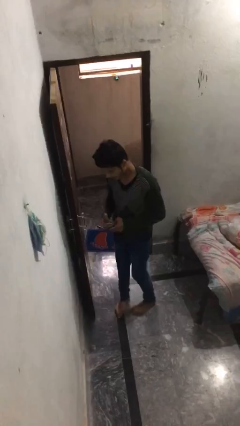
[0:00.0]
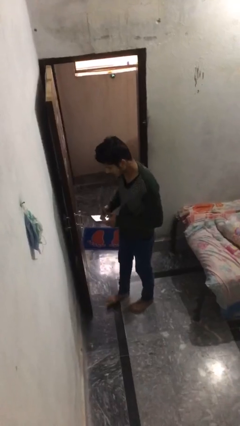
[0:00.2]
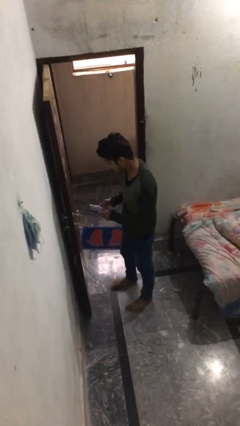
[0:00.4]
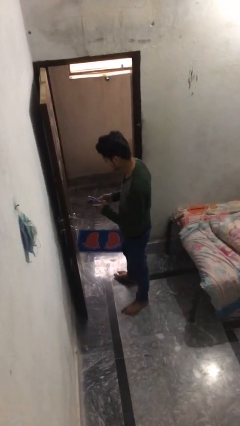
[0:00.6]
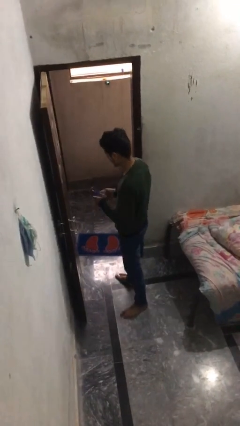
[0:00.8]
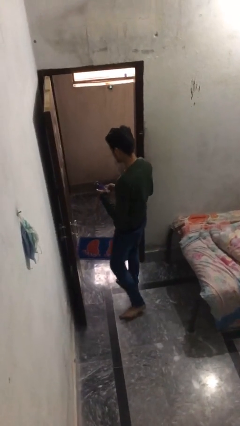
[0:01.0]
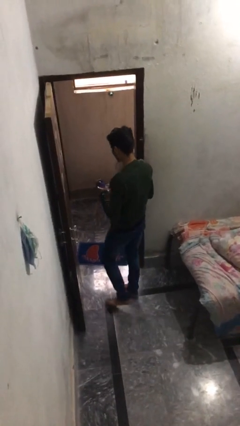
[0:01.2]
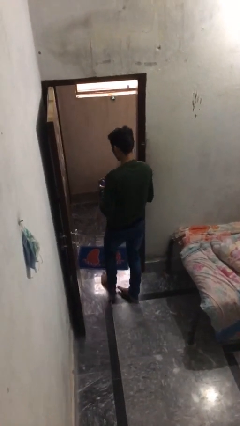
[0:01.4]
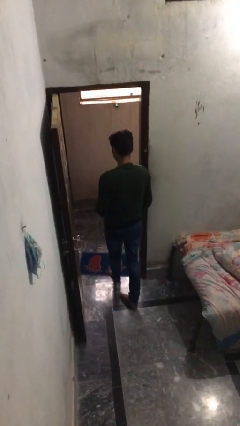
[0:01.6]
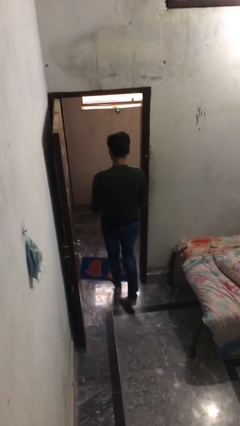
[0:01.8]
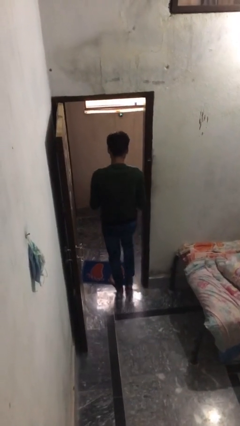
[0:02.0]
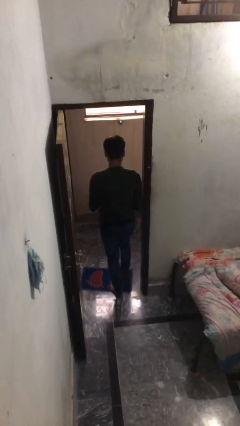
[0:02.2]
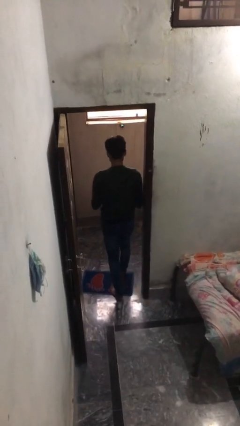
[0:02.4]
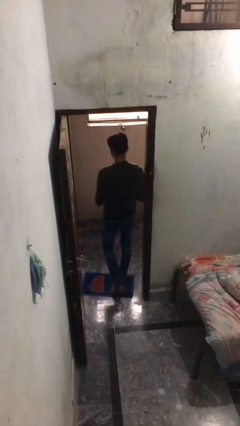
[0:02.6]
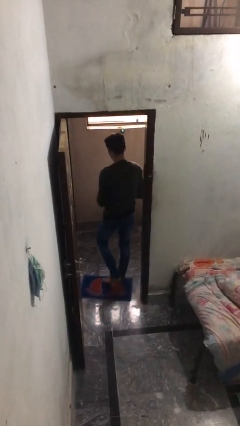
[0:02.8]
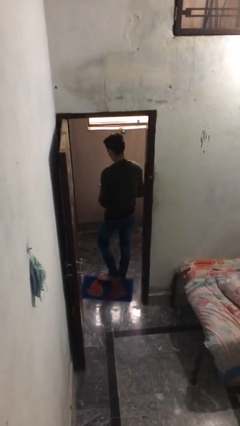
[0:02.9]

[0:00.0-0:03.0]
person exits scene through structure

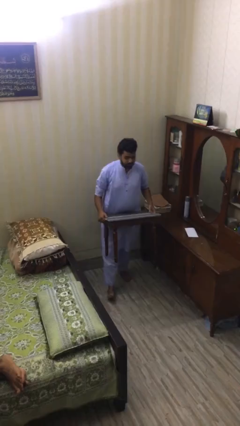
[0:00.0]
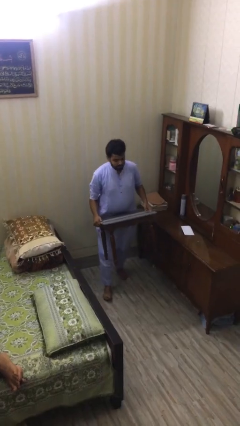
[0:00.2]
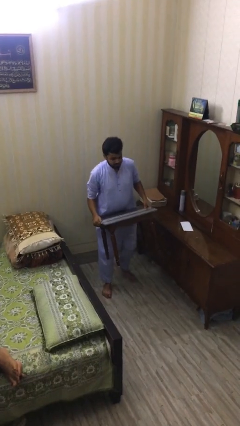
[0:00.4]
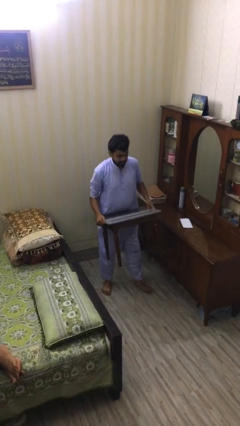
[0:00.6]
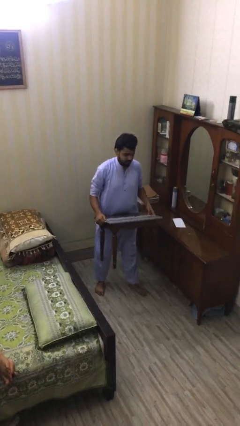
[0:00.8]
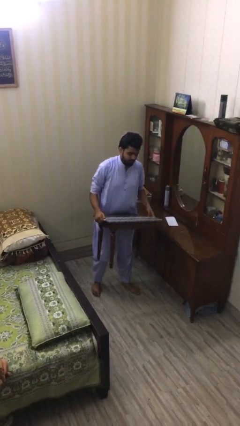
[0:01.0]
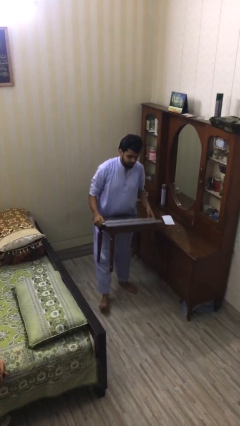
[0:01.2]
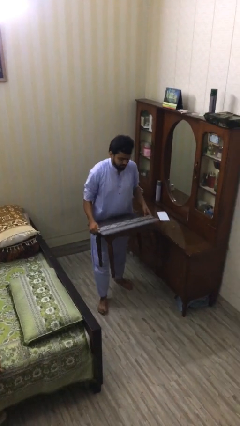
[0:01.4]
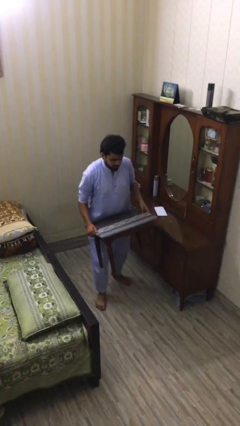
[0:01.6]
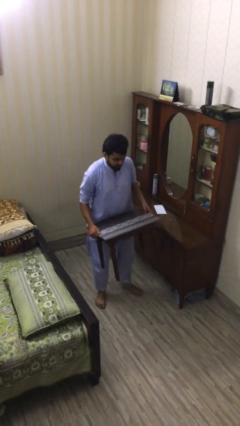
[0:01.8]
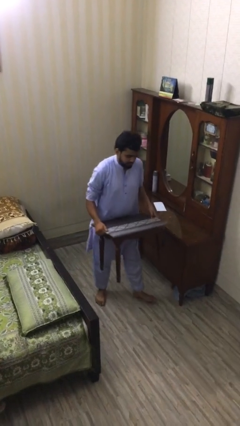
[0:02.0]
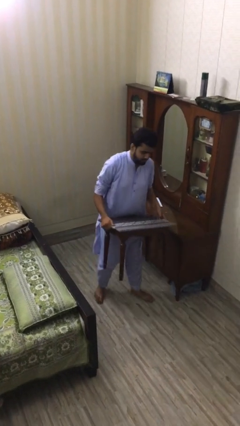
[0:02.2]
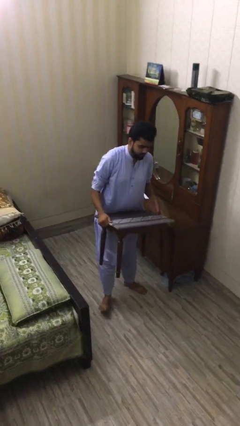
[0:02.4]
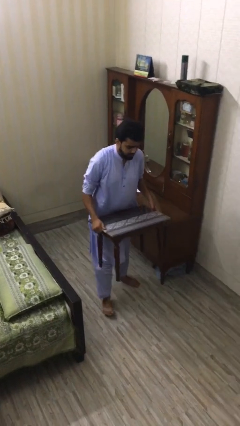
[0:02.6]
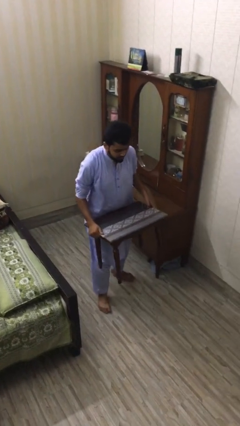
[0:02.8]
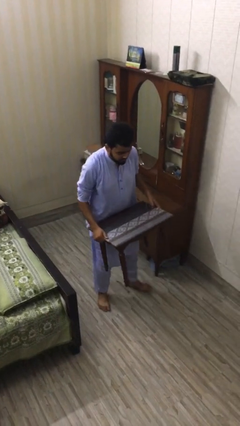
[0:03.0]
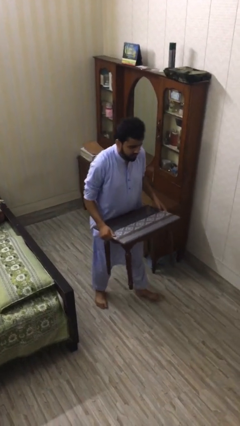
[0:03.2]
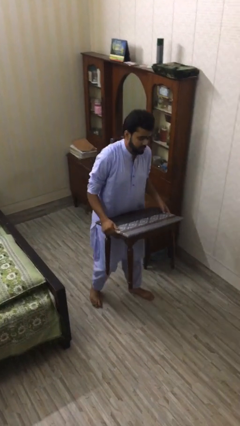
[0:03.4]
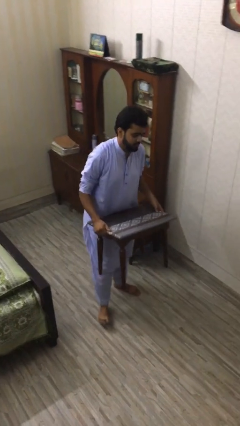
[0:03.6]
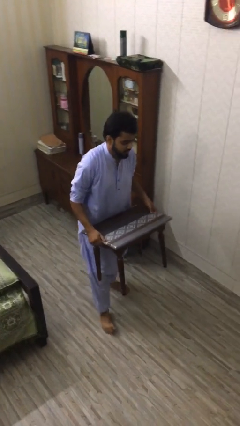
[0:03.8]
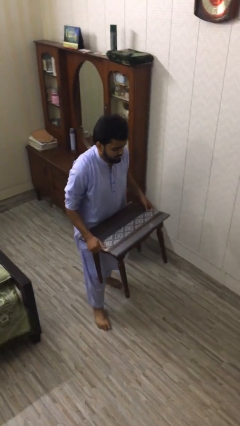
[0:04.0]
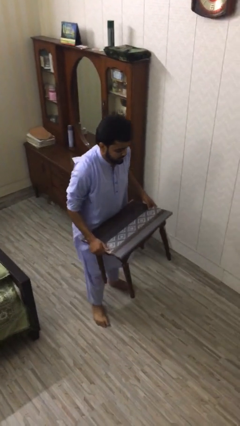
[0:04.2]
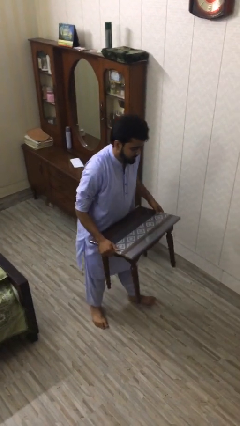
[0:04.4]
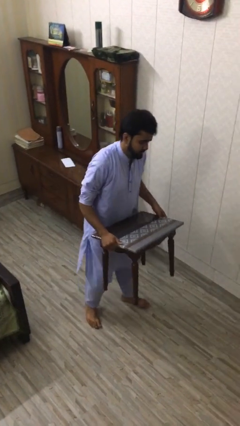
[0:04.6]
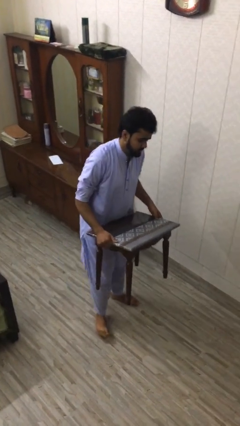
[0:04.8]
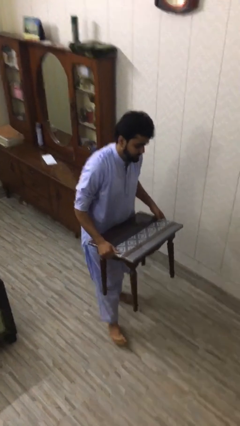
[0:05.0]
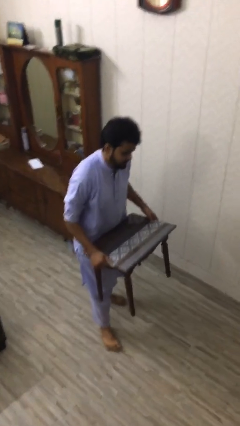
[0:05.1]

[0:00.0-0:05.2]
person carries heavy object

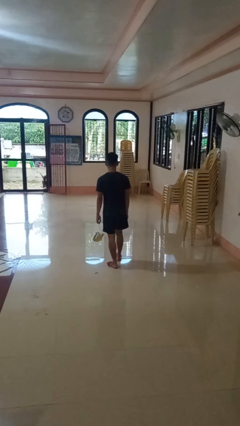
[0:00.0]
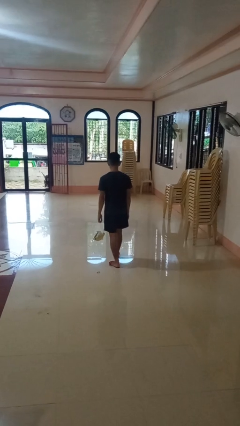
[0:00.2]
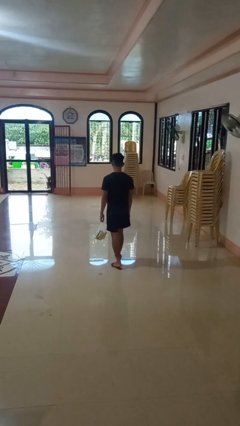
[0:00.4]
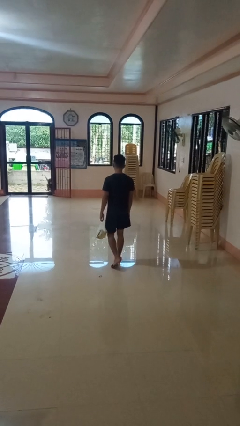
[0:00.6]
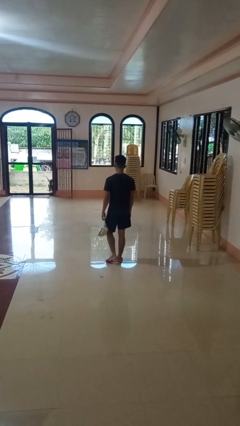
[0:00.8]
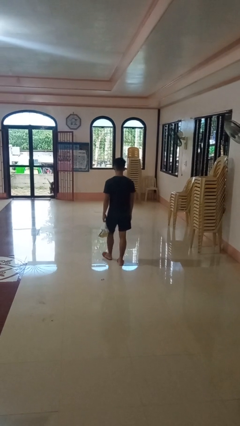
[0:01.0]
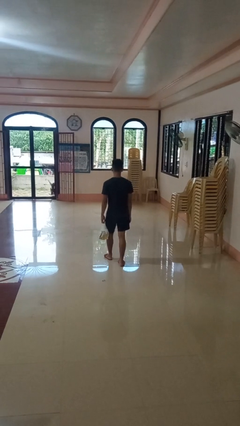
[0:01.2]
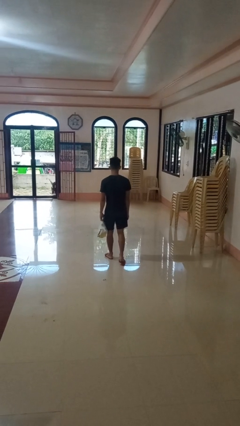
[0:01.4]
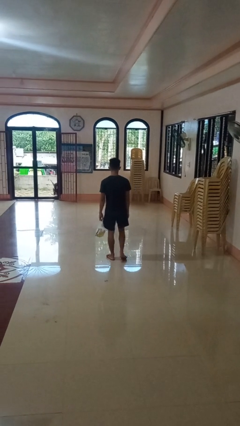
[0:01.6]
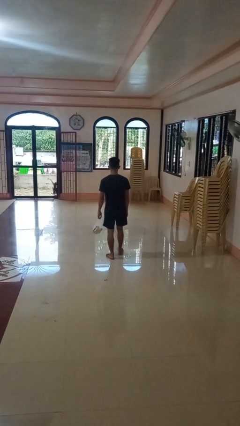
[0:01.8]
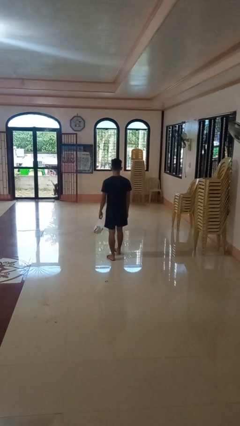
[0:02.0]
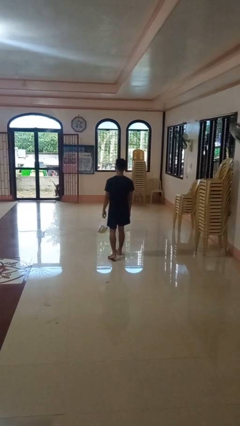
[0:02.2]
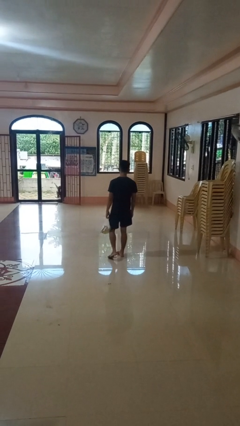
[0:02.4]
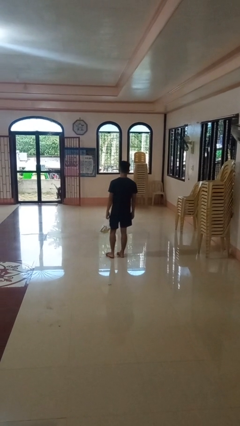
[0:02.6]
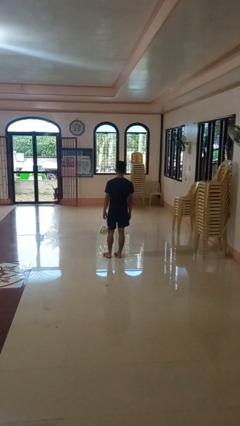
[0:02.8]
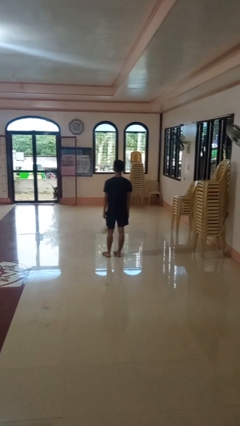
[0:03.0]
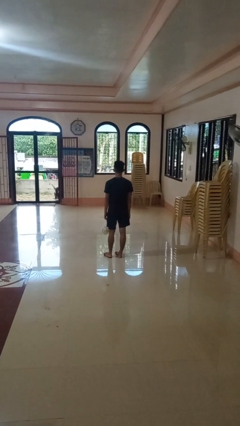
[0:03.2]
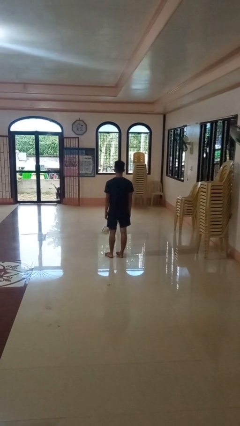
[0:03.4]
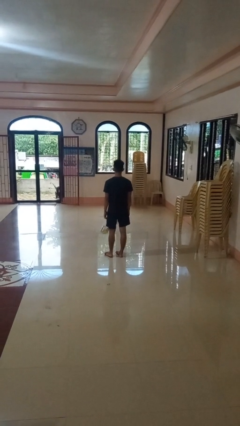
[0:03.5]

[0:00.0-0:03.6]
person carries groceries

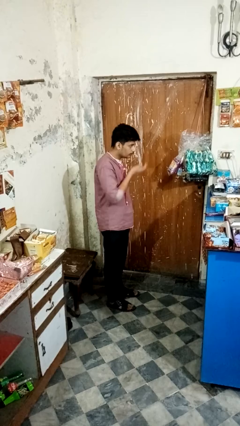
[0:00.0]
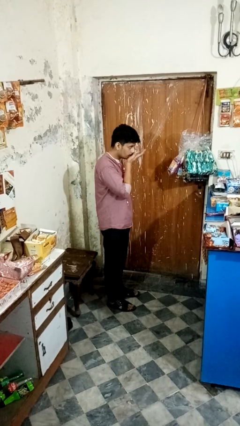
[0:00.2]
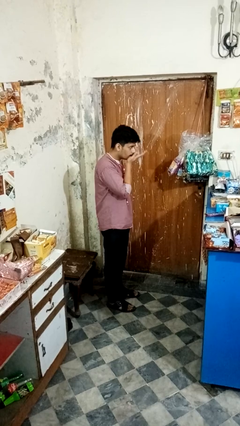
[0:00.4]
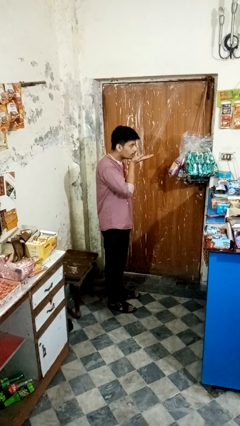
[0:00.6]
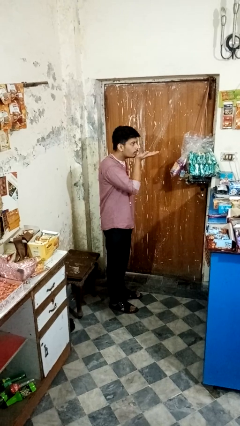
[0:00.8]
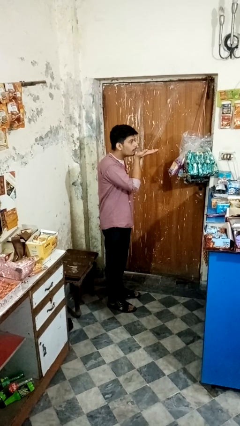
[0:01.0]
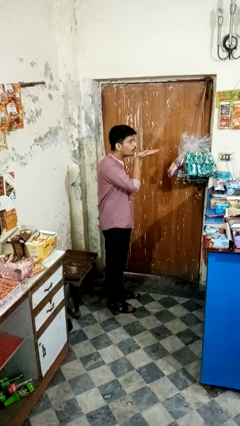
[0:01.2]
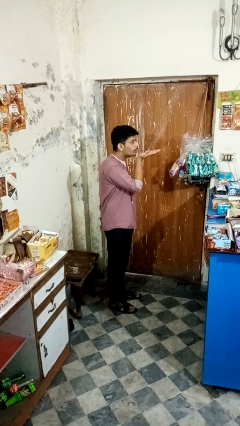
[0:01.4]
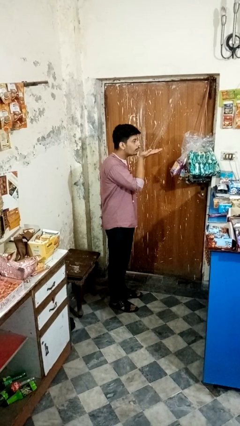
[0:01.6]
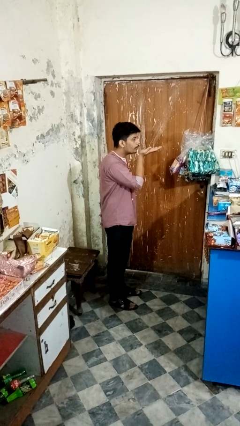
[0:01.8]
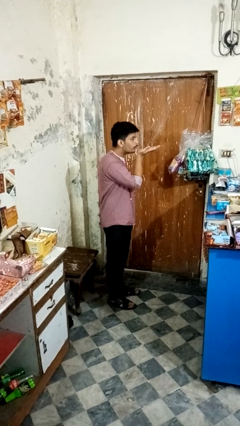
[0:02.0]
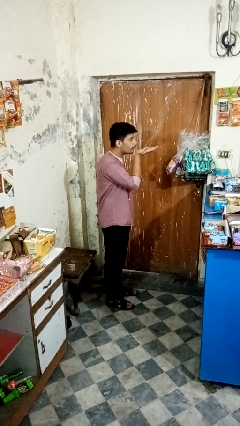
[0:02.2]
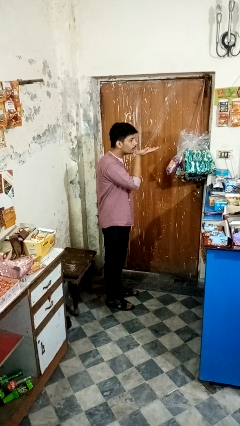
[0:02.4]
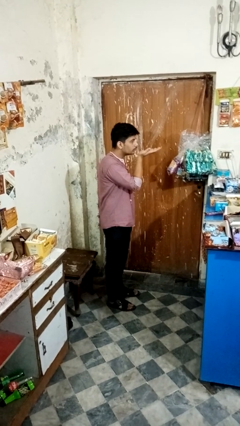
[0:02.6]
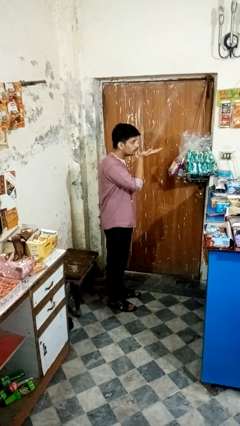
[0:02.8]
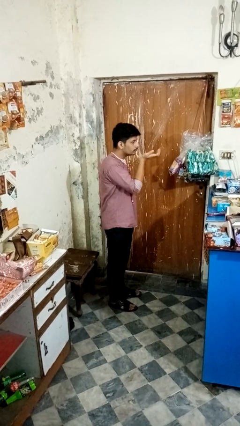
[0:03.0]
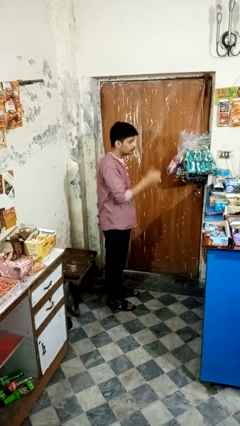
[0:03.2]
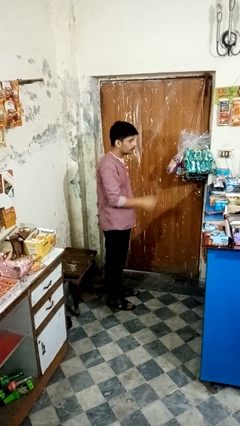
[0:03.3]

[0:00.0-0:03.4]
person gestures blow kiss

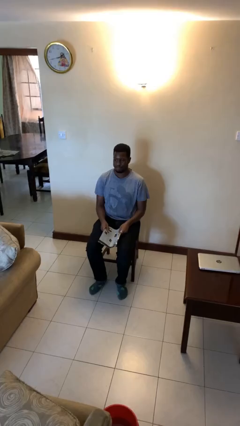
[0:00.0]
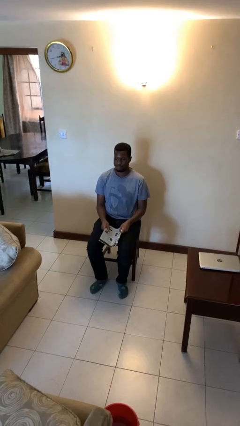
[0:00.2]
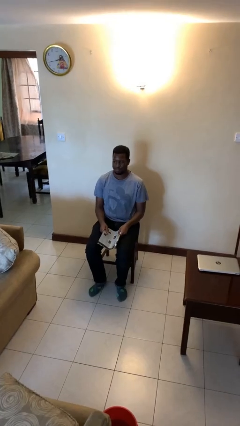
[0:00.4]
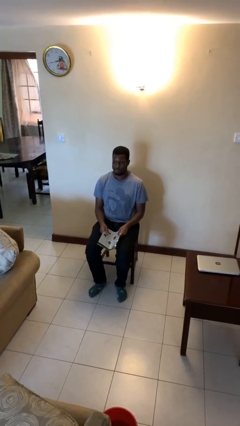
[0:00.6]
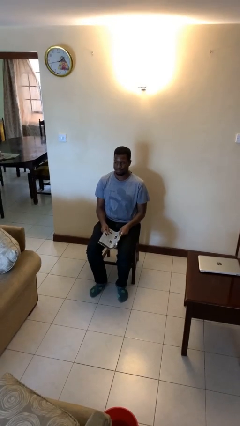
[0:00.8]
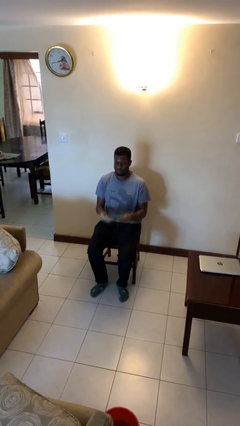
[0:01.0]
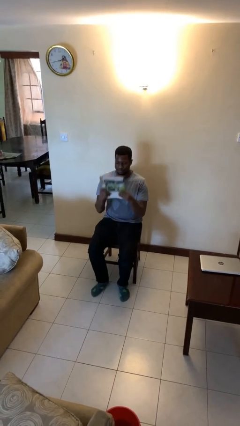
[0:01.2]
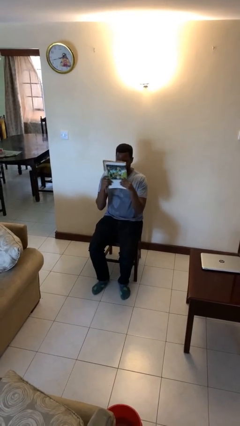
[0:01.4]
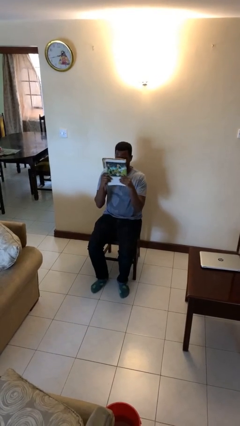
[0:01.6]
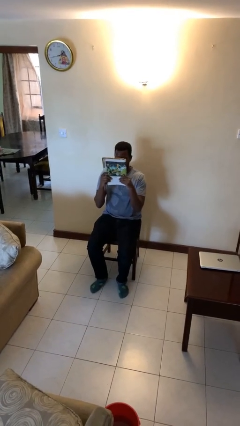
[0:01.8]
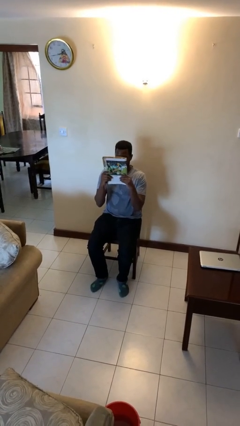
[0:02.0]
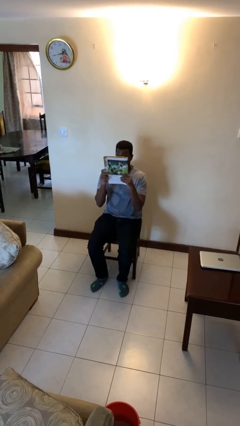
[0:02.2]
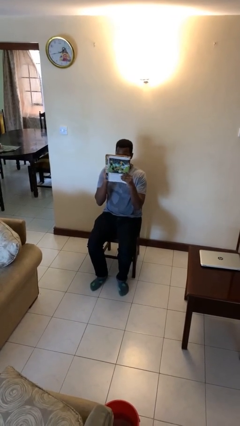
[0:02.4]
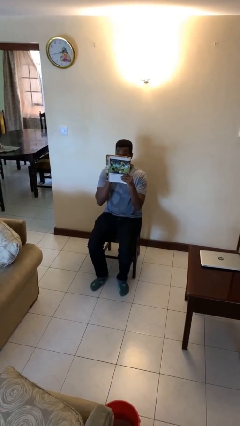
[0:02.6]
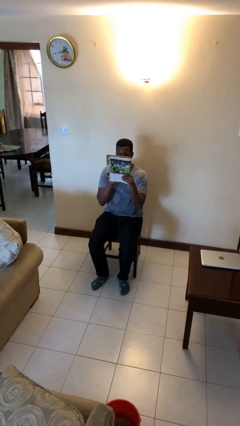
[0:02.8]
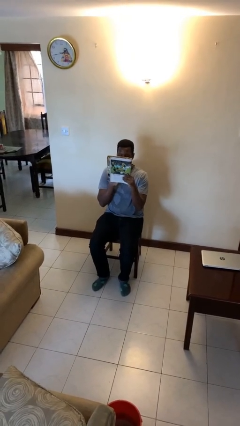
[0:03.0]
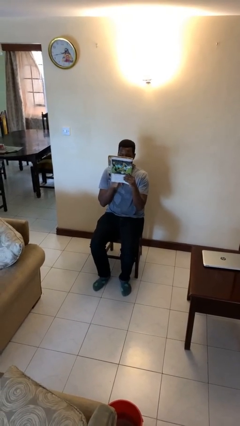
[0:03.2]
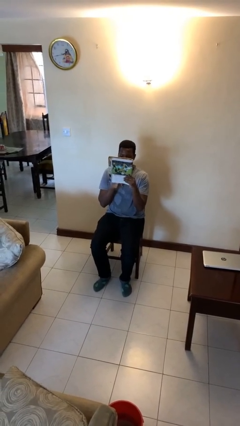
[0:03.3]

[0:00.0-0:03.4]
person reads document
